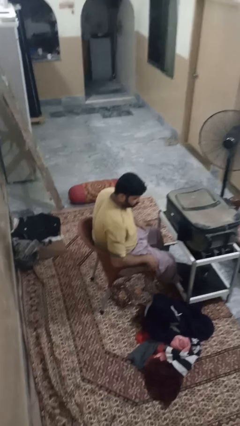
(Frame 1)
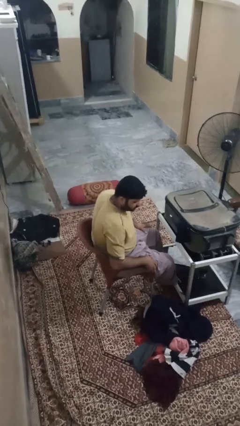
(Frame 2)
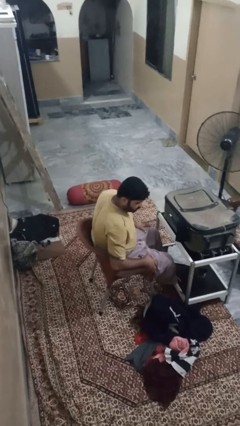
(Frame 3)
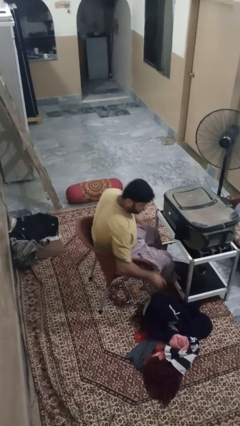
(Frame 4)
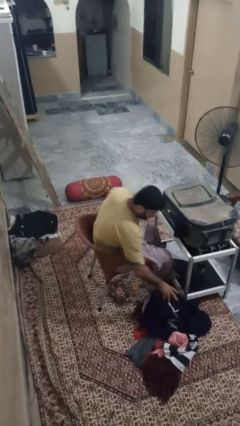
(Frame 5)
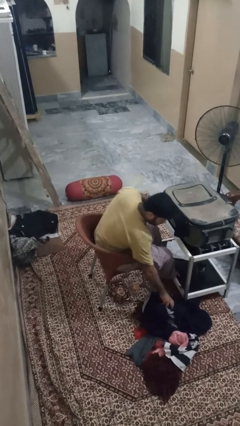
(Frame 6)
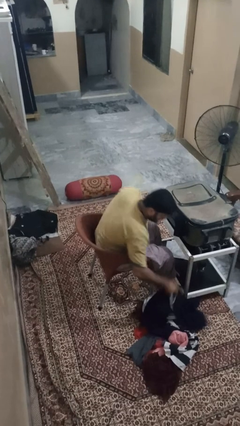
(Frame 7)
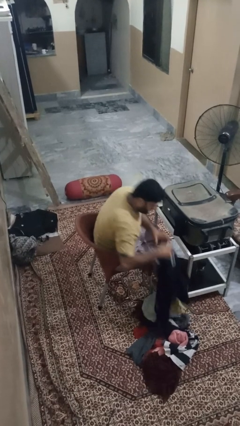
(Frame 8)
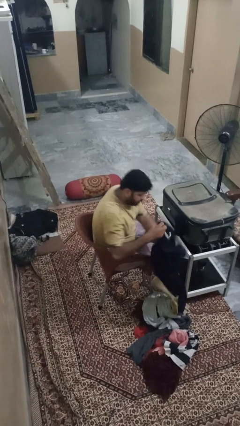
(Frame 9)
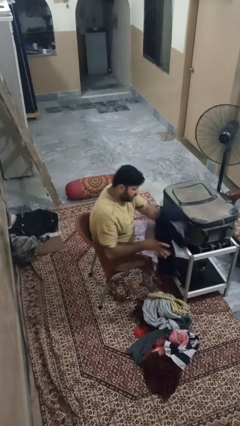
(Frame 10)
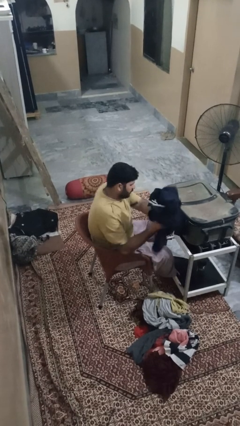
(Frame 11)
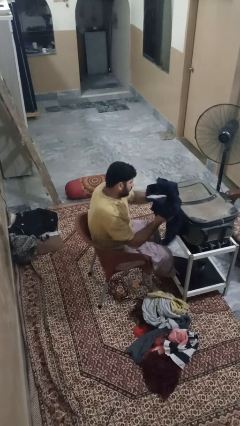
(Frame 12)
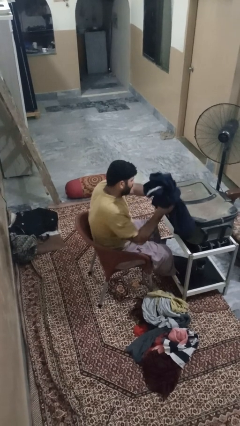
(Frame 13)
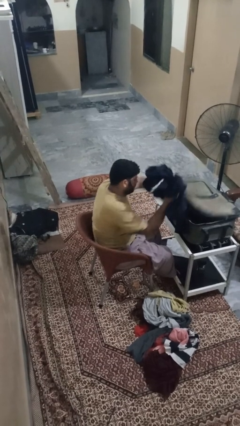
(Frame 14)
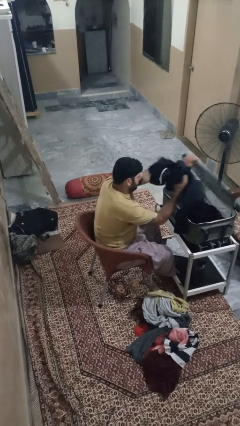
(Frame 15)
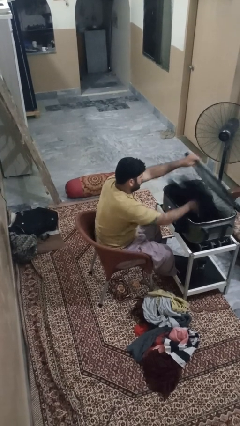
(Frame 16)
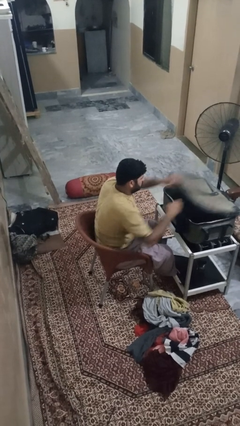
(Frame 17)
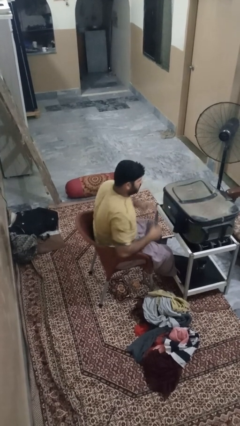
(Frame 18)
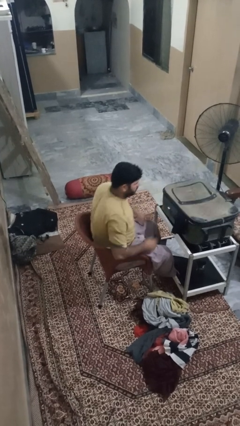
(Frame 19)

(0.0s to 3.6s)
person loads clothes into suitcase

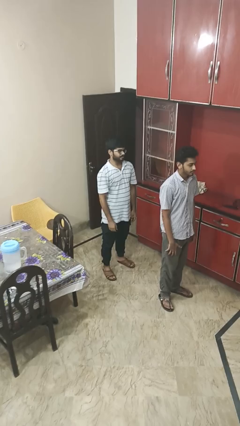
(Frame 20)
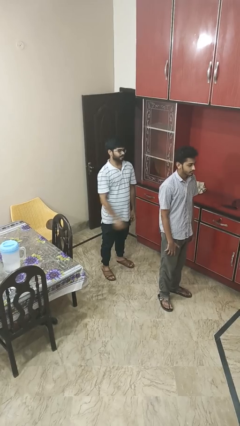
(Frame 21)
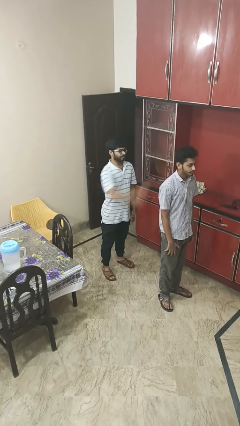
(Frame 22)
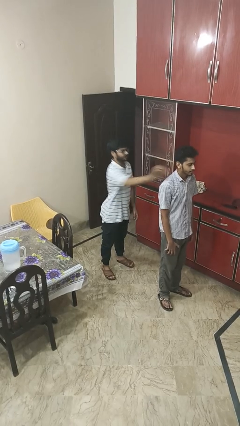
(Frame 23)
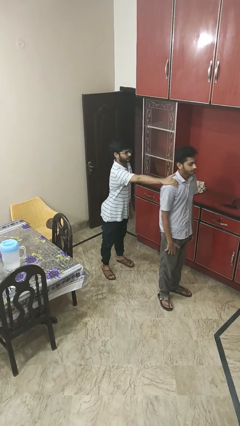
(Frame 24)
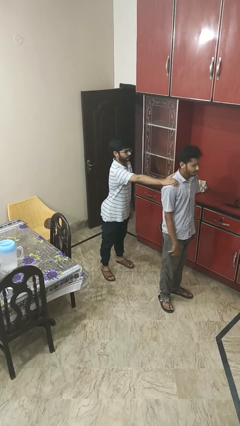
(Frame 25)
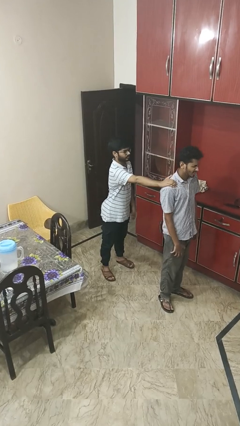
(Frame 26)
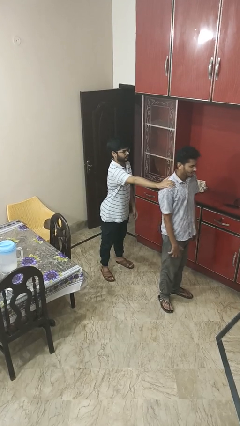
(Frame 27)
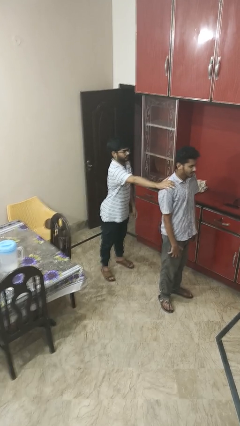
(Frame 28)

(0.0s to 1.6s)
person grabs person by shoulder

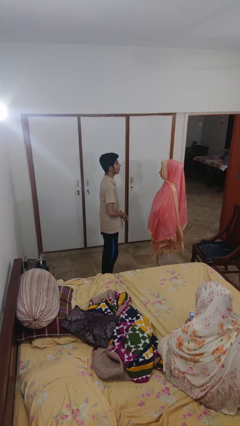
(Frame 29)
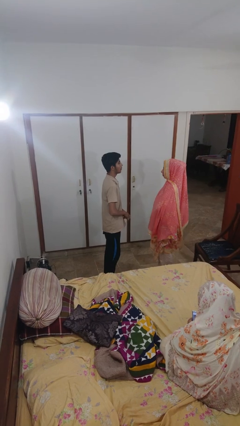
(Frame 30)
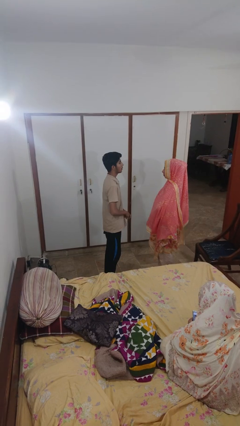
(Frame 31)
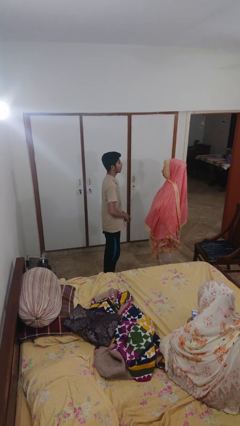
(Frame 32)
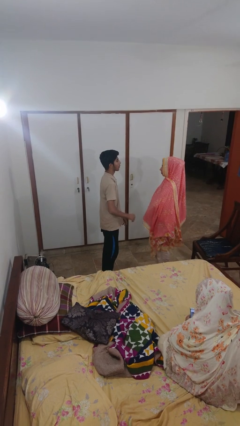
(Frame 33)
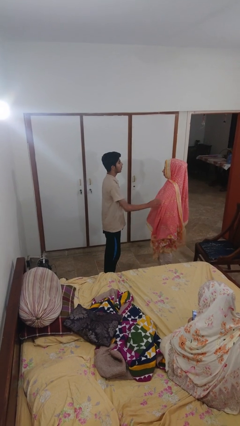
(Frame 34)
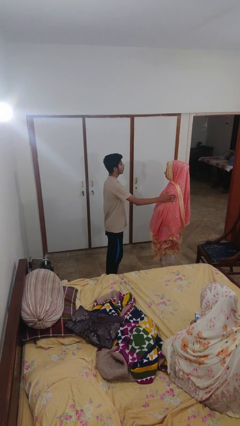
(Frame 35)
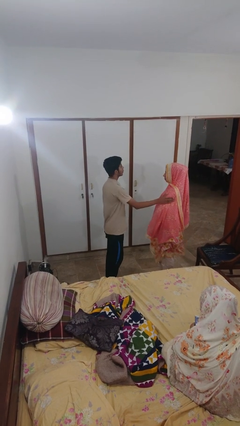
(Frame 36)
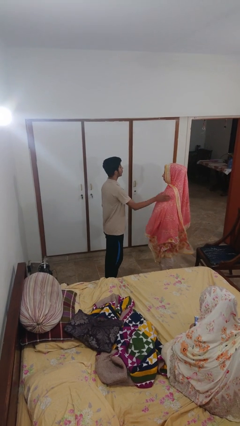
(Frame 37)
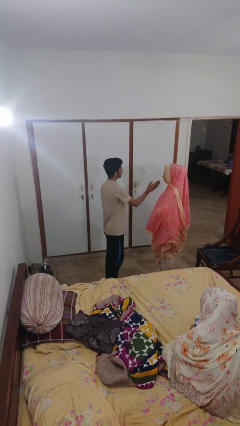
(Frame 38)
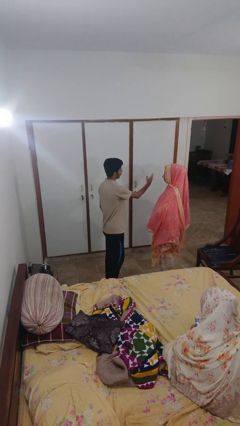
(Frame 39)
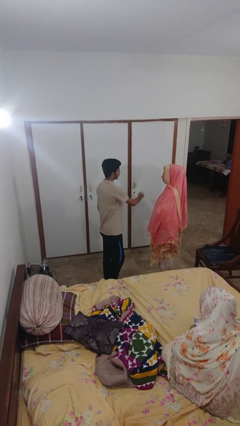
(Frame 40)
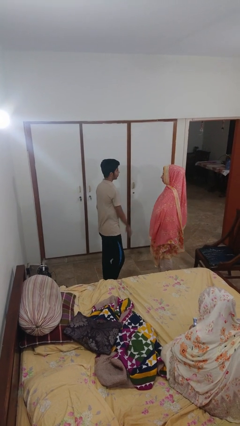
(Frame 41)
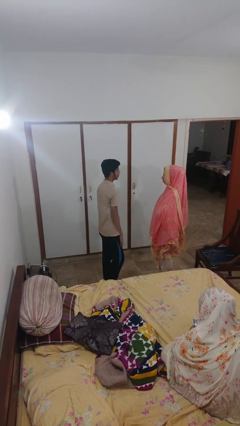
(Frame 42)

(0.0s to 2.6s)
person shoves person

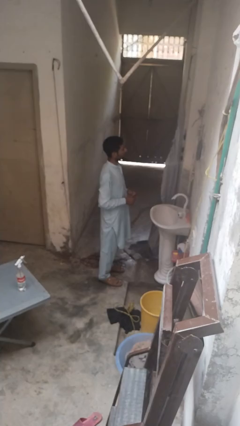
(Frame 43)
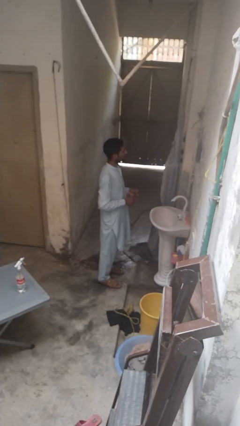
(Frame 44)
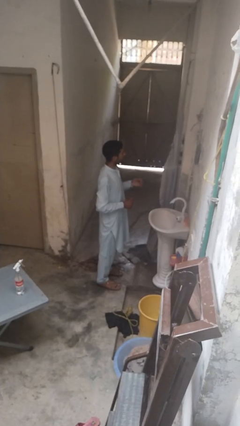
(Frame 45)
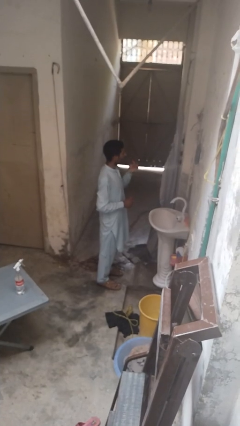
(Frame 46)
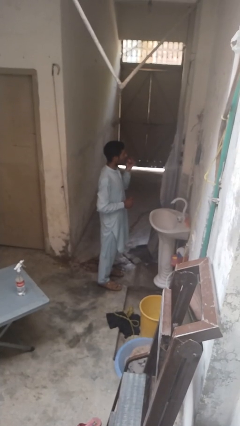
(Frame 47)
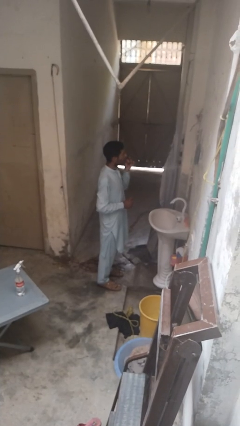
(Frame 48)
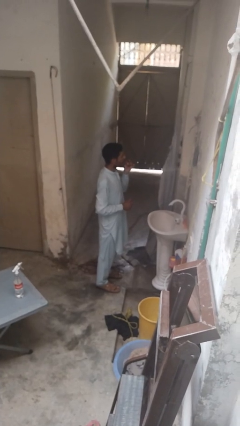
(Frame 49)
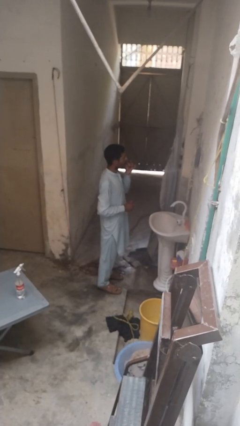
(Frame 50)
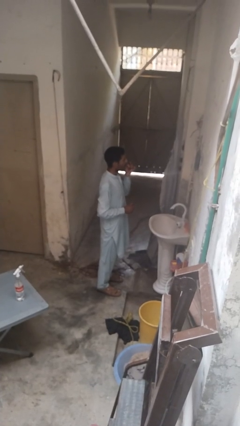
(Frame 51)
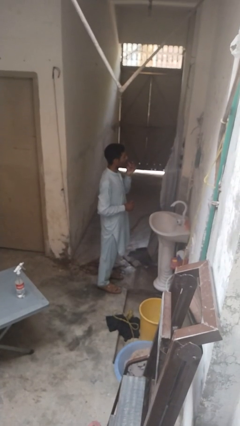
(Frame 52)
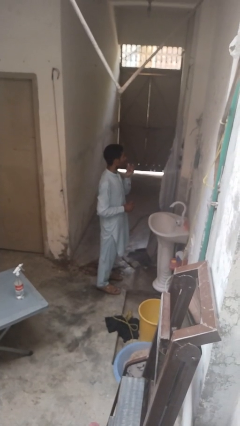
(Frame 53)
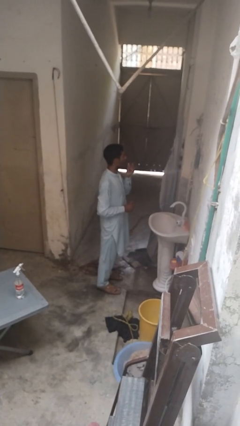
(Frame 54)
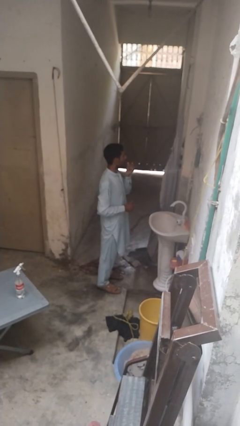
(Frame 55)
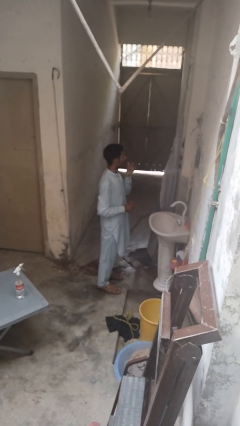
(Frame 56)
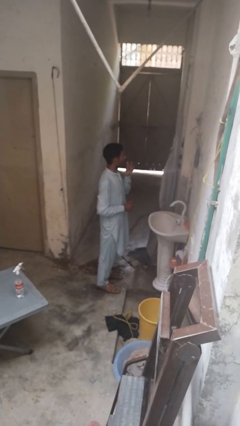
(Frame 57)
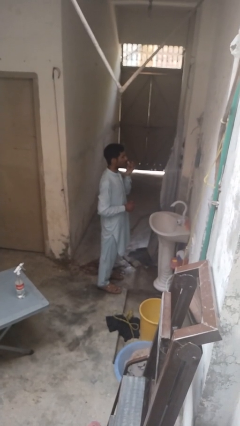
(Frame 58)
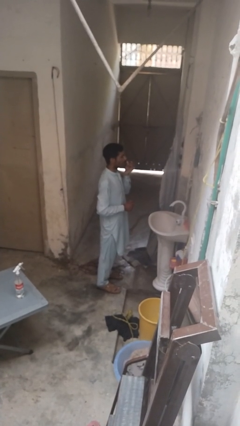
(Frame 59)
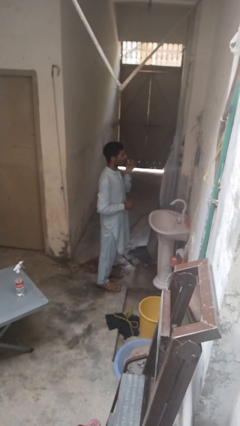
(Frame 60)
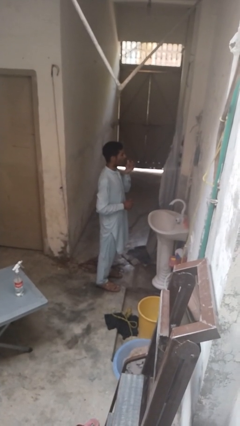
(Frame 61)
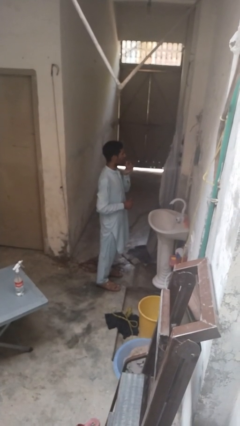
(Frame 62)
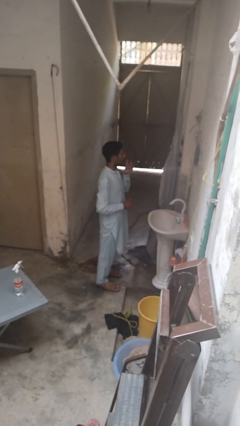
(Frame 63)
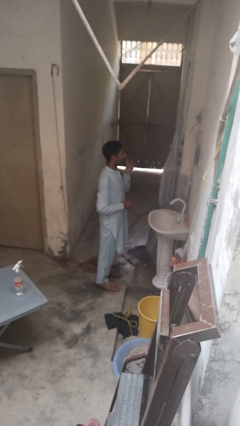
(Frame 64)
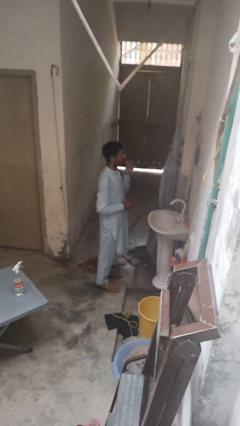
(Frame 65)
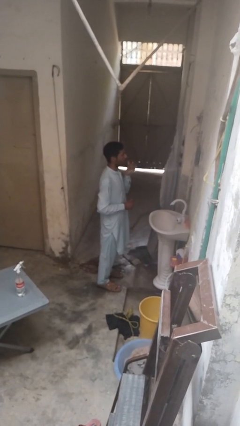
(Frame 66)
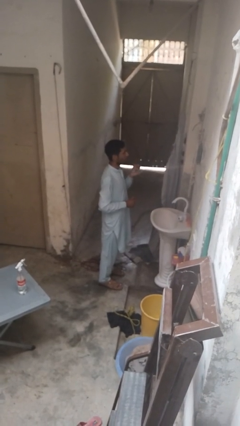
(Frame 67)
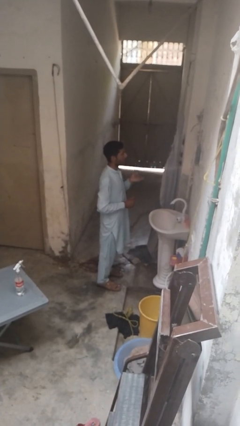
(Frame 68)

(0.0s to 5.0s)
person applies lip makeup

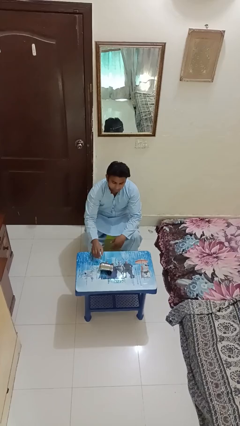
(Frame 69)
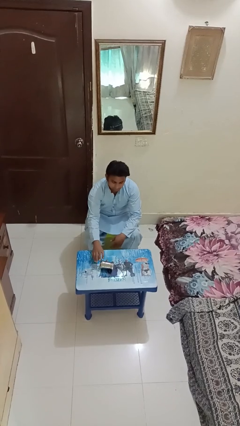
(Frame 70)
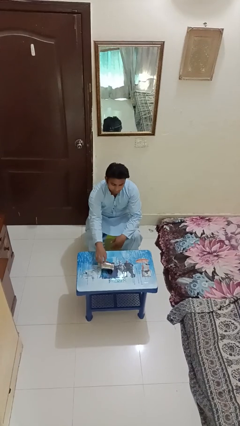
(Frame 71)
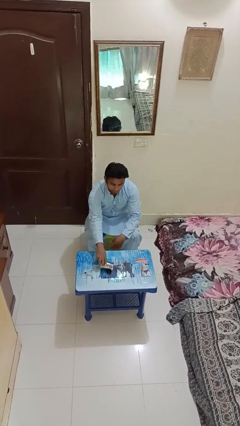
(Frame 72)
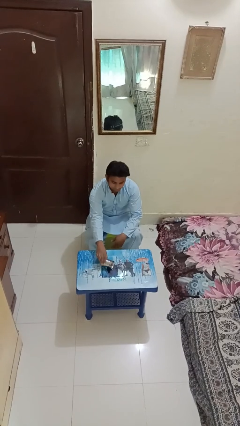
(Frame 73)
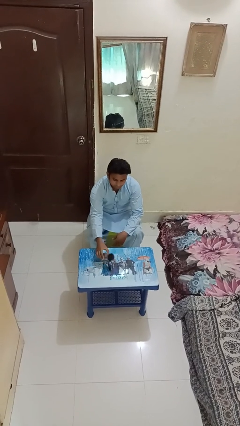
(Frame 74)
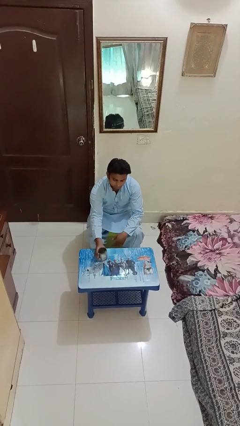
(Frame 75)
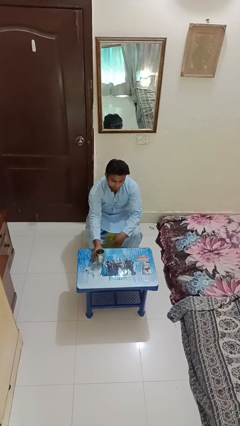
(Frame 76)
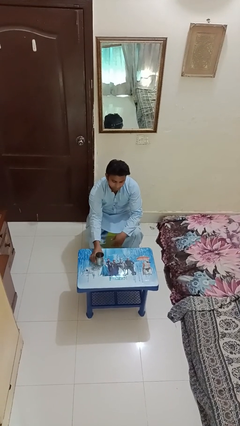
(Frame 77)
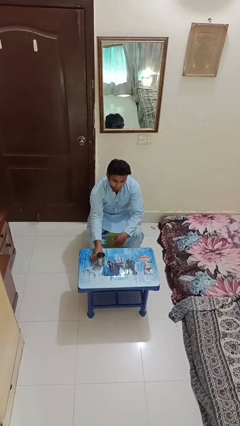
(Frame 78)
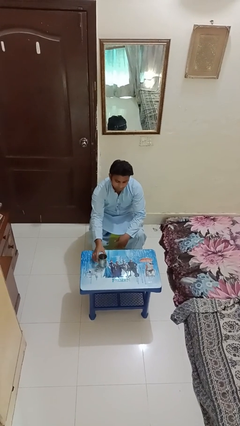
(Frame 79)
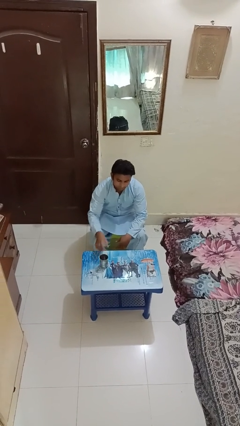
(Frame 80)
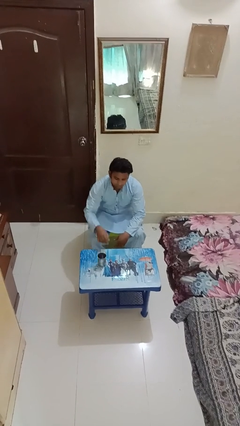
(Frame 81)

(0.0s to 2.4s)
person sets upright glass

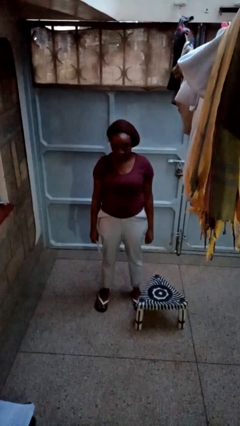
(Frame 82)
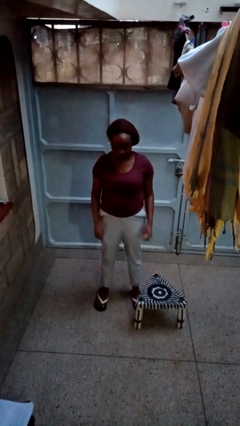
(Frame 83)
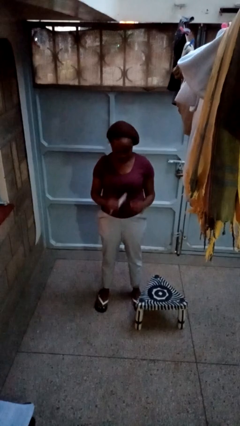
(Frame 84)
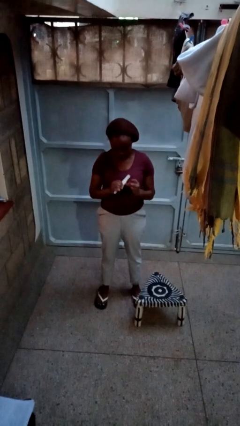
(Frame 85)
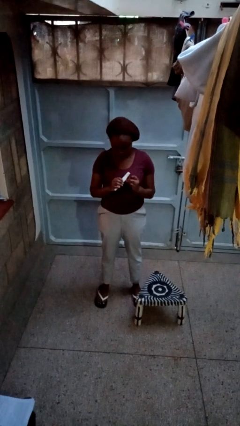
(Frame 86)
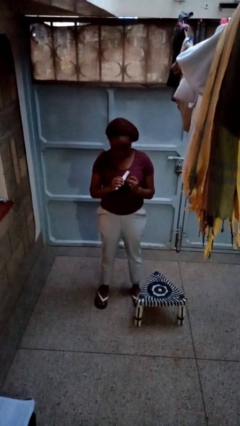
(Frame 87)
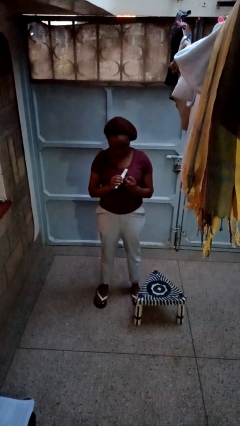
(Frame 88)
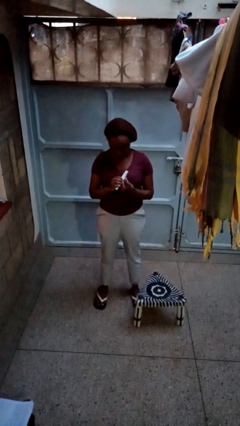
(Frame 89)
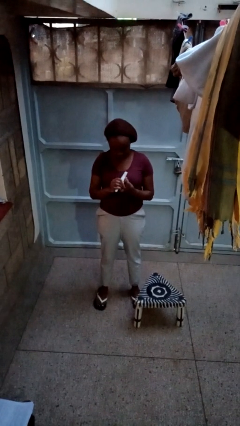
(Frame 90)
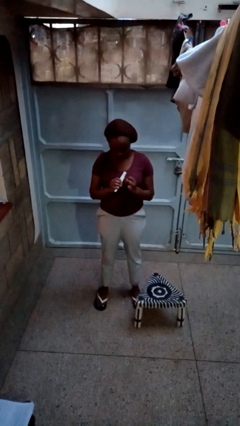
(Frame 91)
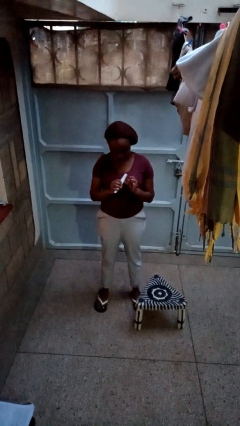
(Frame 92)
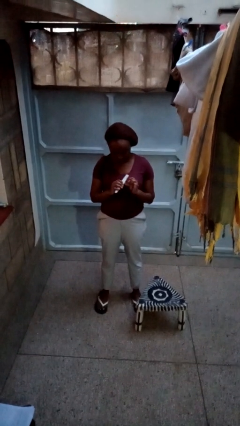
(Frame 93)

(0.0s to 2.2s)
person files fingernails
